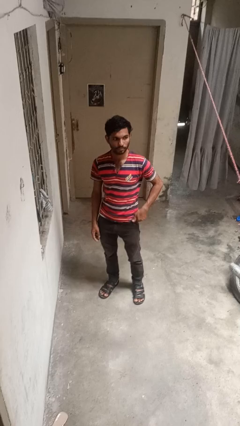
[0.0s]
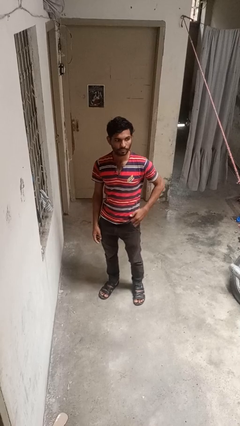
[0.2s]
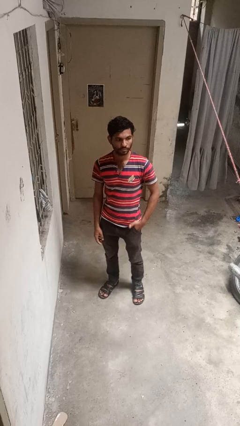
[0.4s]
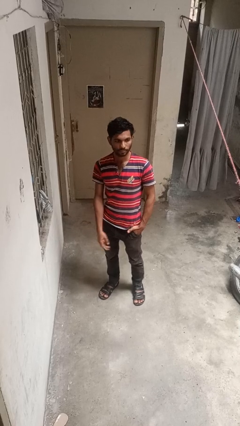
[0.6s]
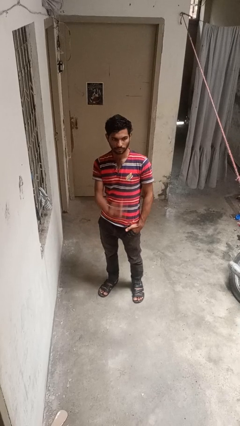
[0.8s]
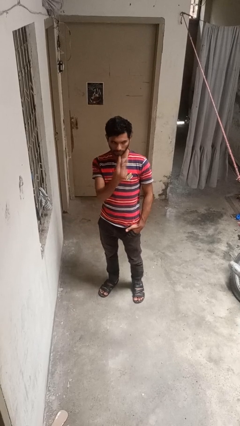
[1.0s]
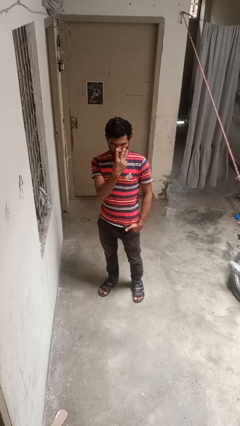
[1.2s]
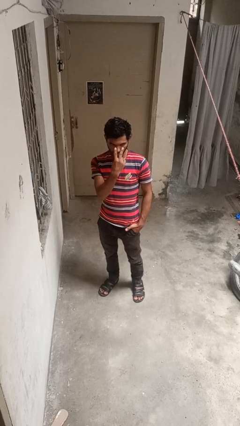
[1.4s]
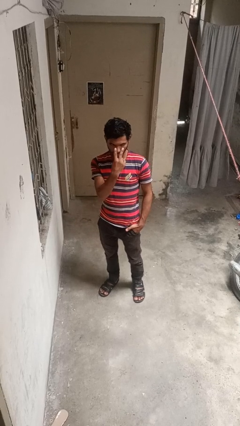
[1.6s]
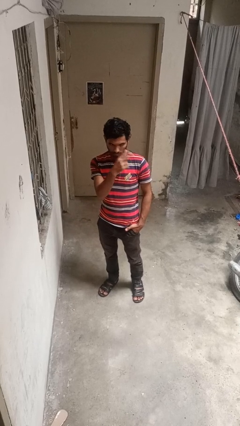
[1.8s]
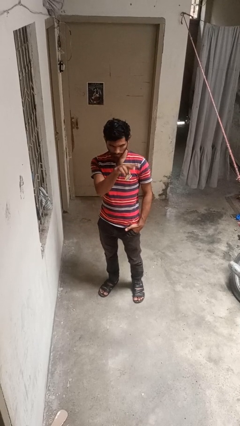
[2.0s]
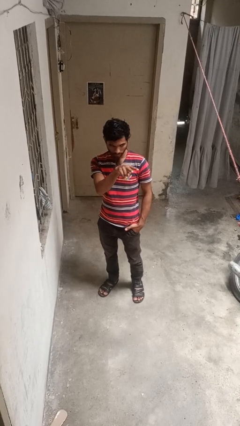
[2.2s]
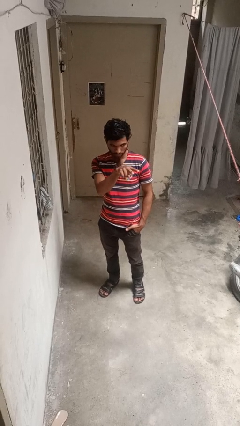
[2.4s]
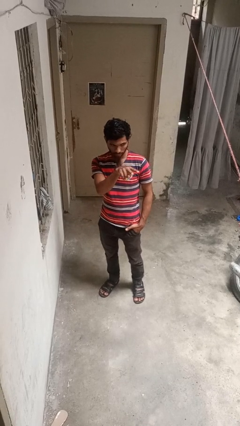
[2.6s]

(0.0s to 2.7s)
person gestures watch closely

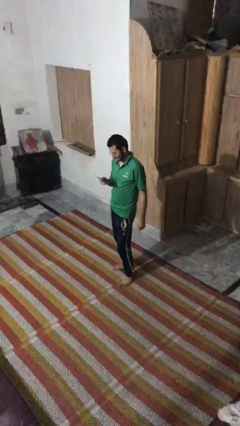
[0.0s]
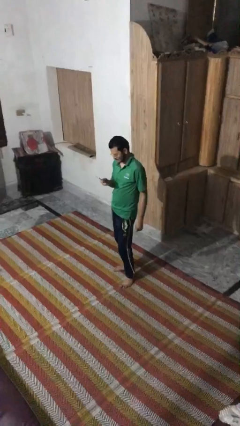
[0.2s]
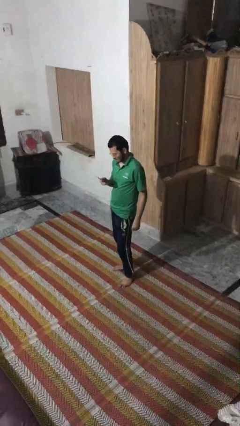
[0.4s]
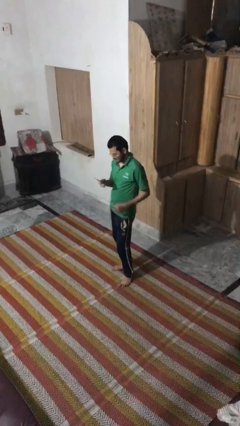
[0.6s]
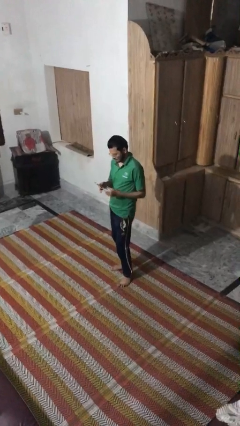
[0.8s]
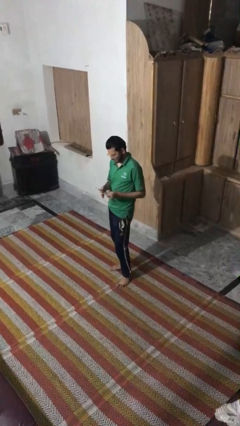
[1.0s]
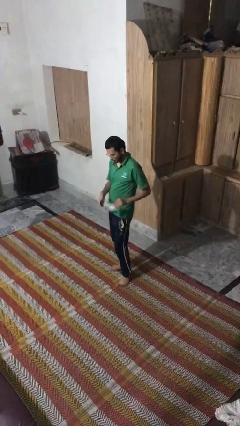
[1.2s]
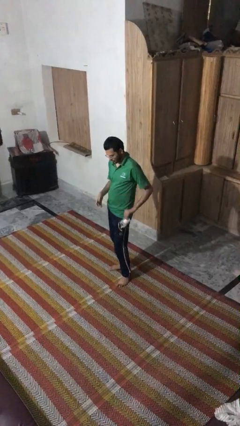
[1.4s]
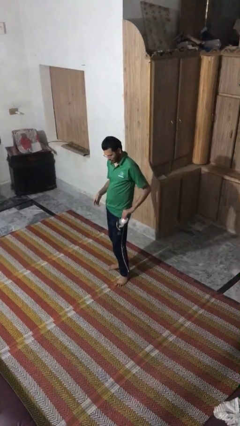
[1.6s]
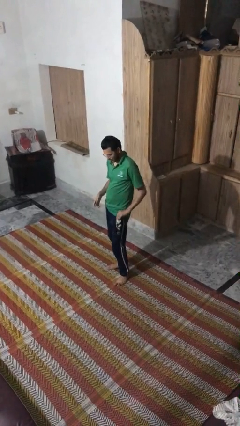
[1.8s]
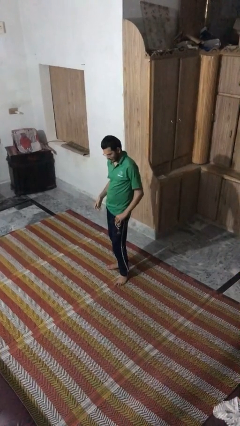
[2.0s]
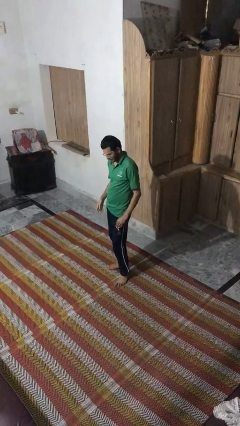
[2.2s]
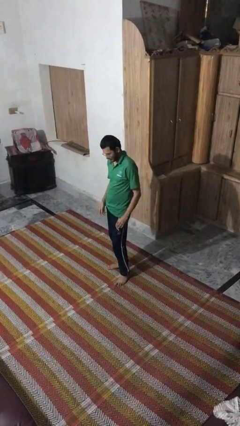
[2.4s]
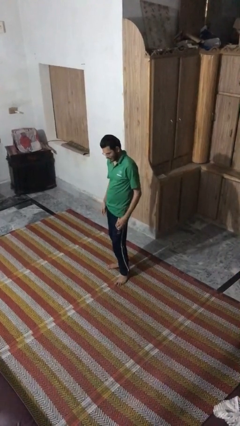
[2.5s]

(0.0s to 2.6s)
person puts phone into pocket

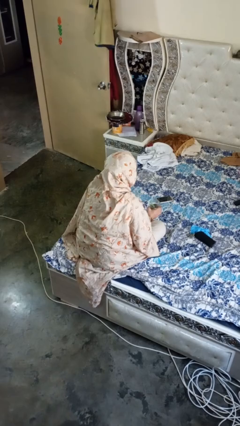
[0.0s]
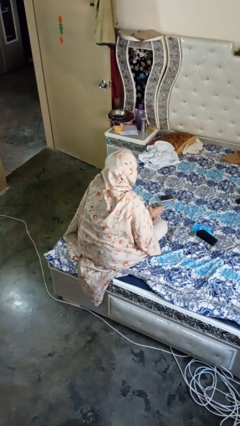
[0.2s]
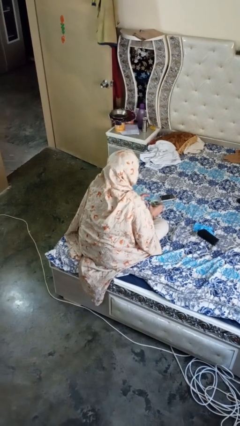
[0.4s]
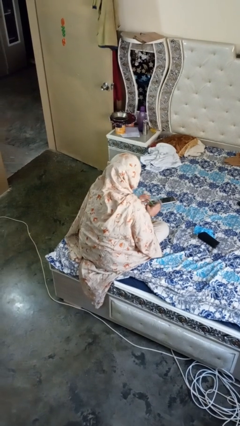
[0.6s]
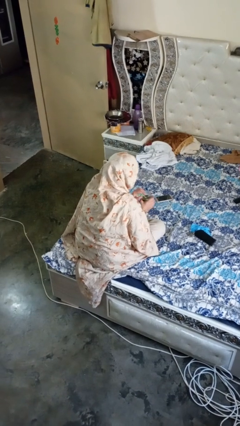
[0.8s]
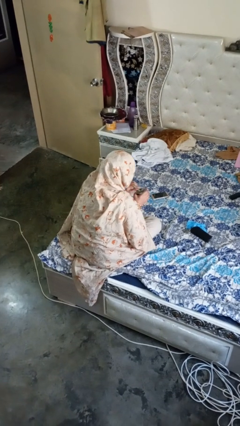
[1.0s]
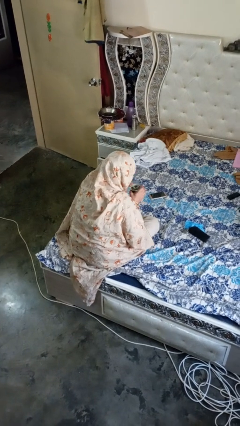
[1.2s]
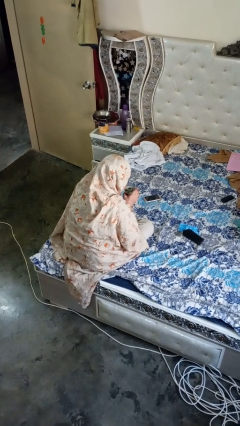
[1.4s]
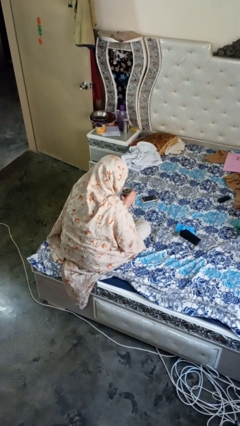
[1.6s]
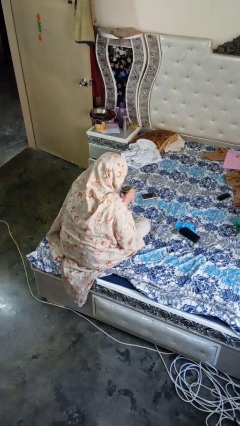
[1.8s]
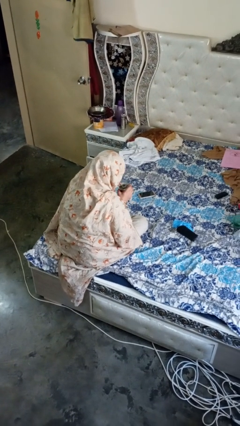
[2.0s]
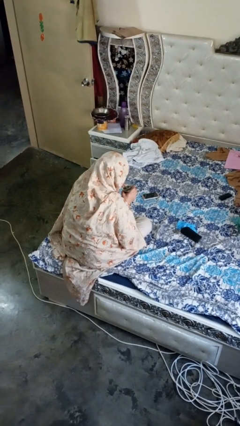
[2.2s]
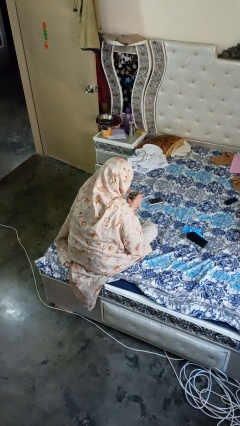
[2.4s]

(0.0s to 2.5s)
person drinks from straw

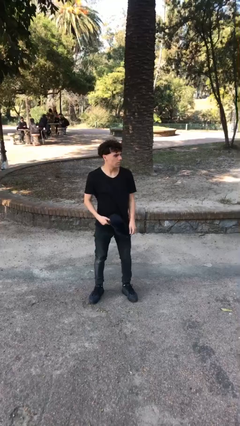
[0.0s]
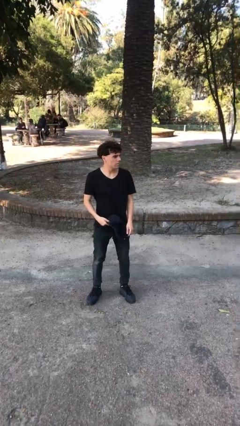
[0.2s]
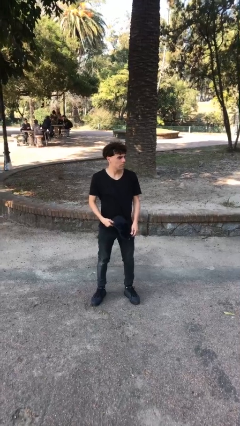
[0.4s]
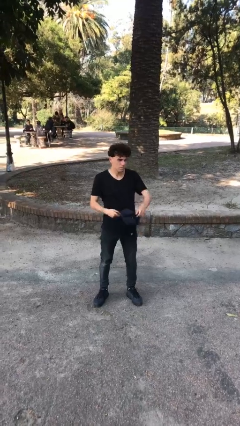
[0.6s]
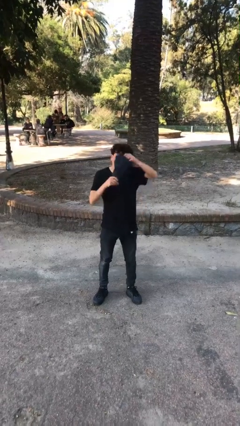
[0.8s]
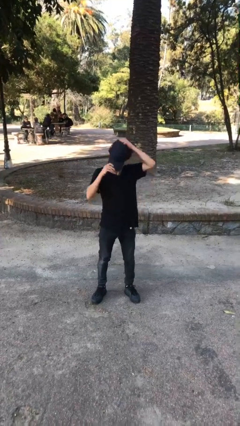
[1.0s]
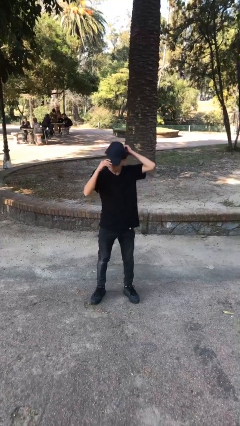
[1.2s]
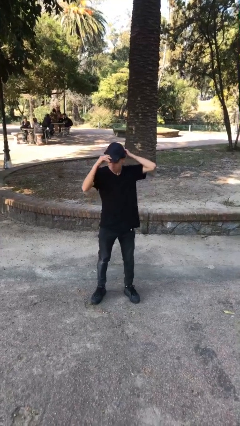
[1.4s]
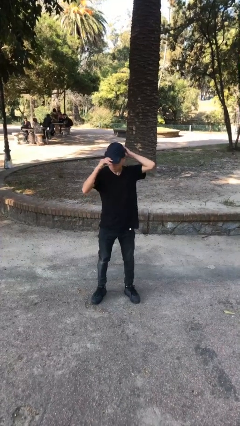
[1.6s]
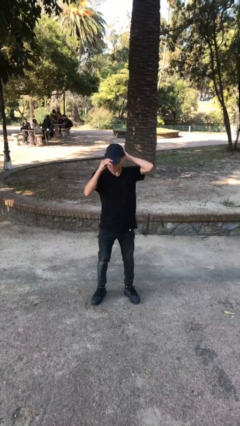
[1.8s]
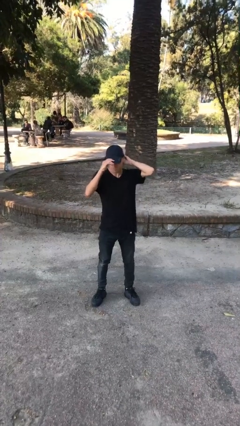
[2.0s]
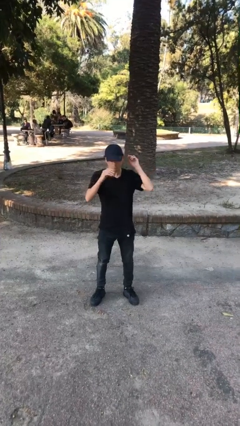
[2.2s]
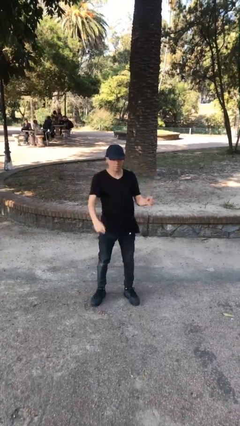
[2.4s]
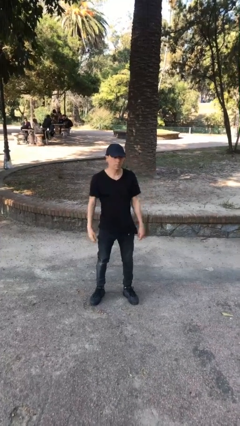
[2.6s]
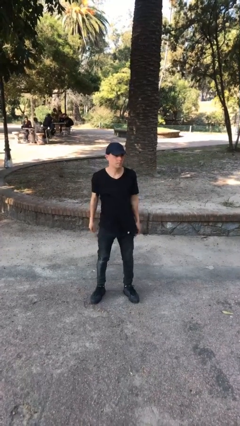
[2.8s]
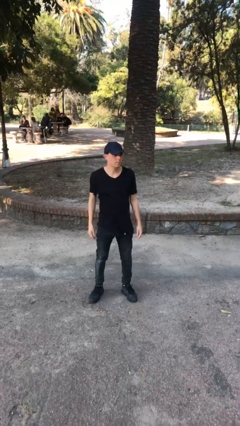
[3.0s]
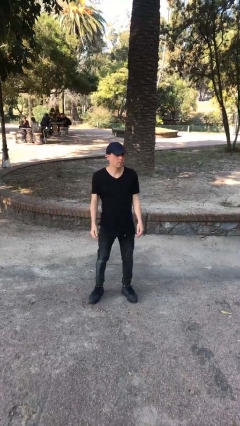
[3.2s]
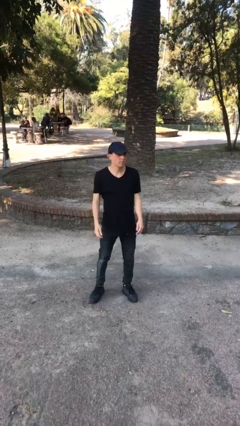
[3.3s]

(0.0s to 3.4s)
person puts on hat

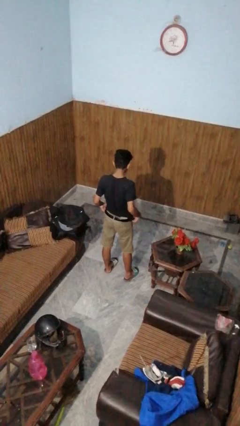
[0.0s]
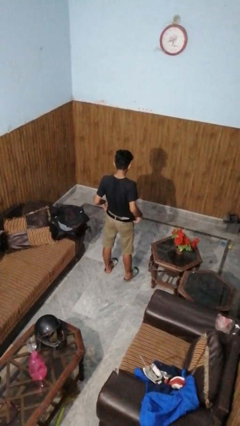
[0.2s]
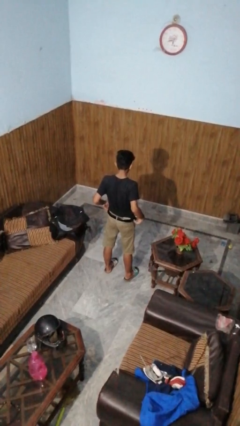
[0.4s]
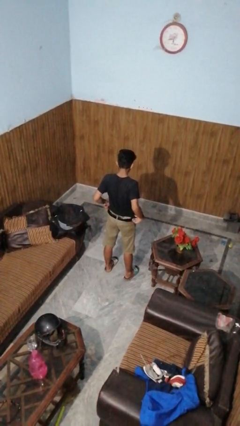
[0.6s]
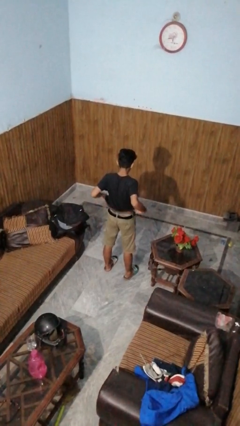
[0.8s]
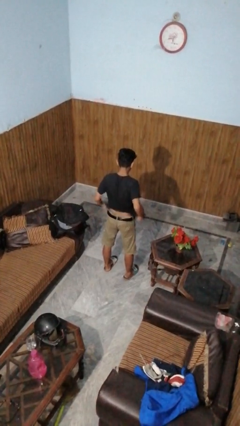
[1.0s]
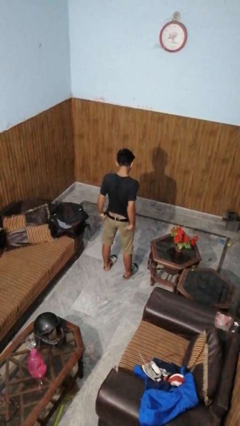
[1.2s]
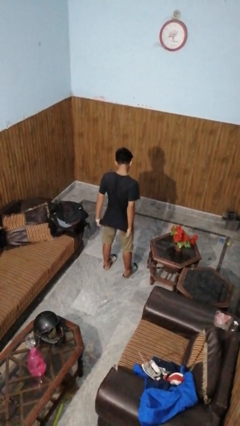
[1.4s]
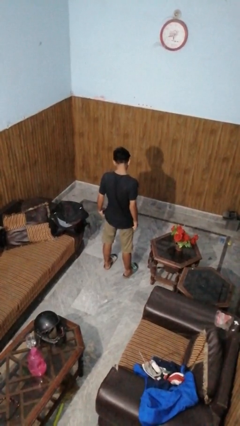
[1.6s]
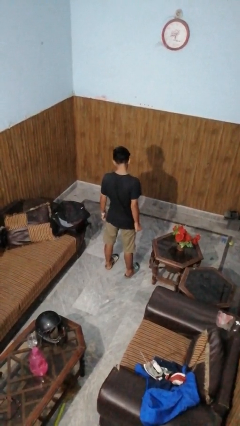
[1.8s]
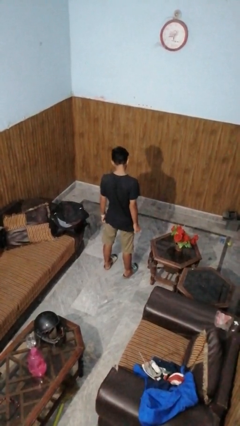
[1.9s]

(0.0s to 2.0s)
person untucks shirt

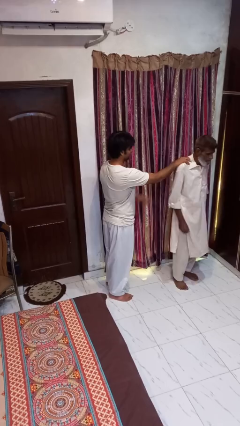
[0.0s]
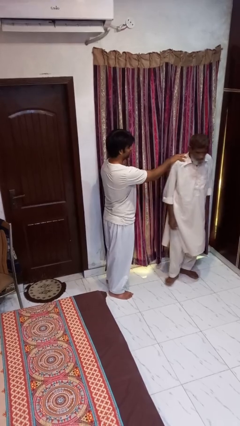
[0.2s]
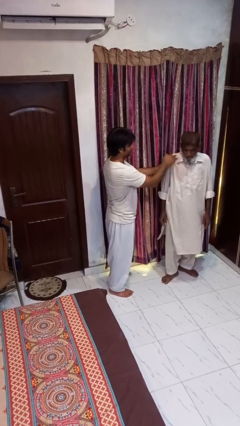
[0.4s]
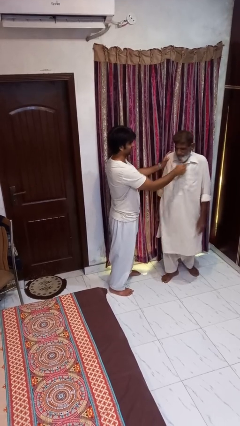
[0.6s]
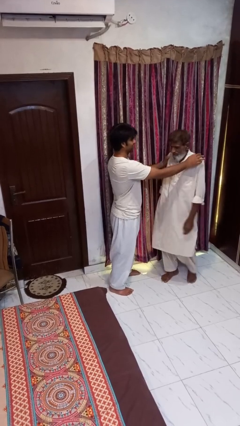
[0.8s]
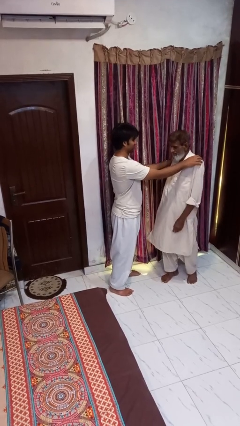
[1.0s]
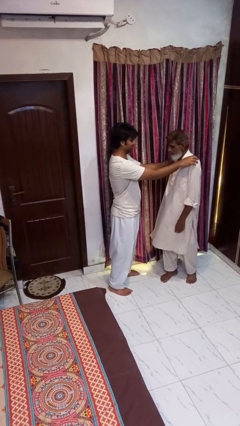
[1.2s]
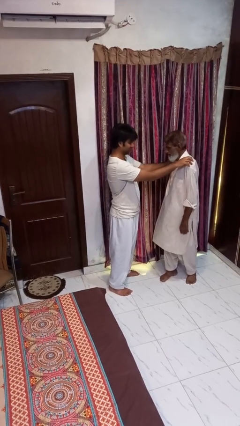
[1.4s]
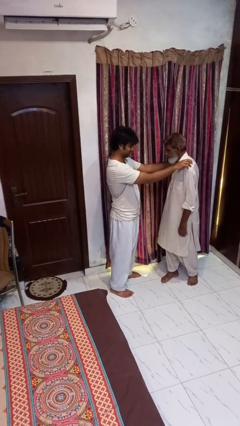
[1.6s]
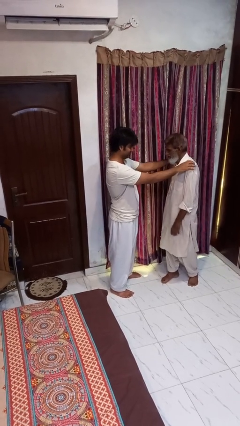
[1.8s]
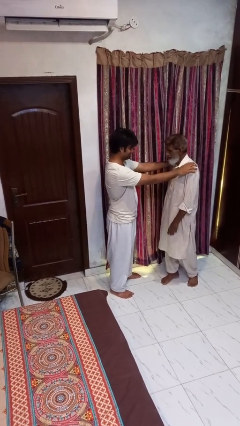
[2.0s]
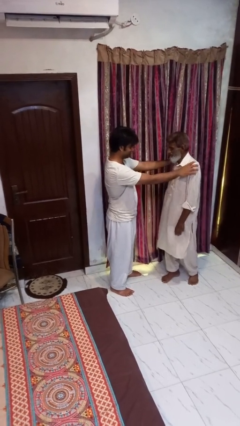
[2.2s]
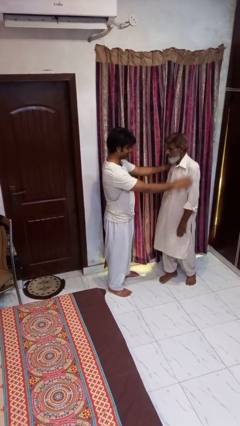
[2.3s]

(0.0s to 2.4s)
person spins person around

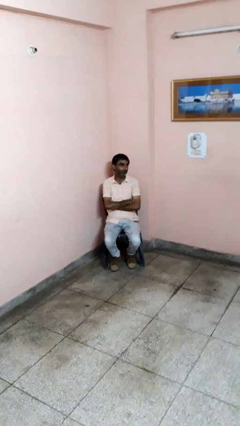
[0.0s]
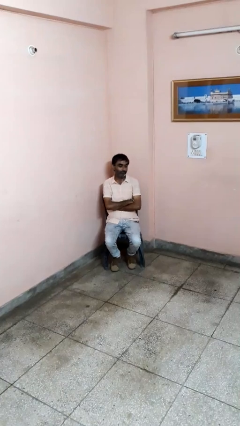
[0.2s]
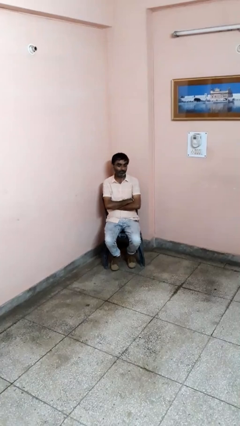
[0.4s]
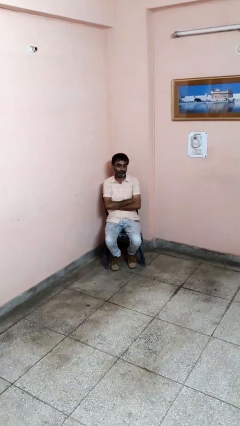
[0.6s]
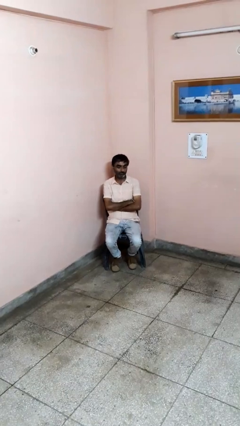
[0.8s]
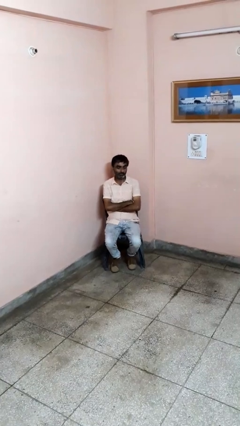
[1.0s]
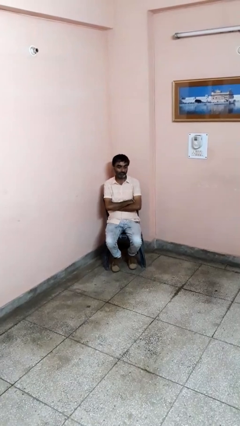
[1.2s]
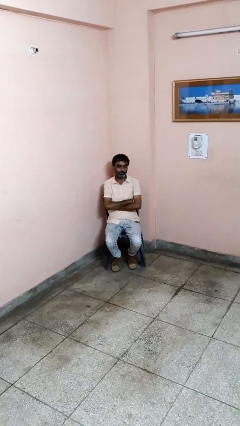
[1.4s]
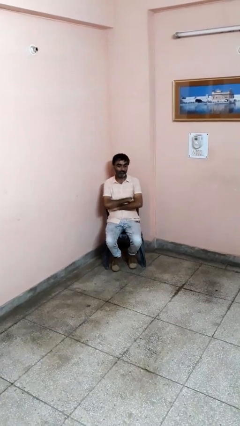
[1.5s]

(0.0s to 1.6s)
person crosses arms
